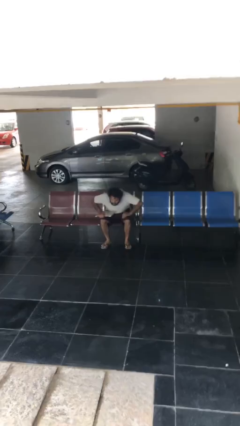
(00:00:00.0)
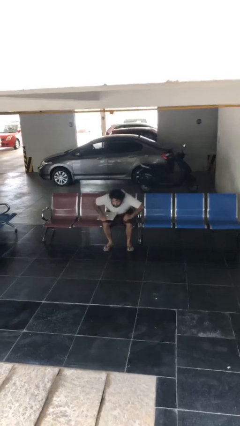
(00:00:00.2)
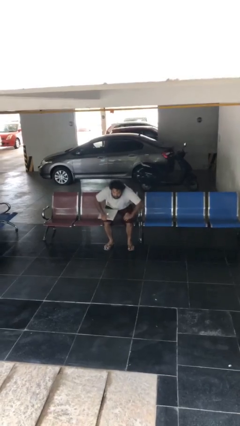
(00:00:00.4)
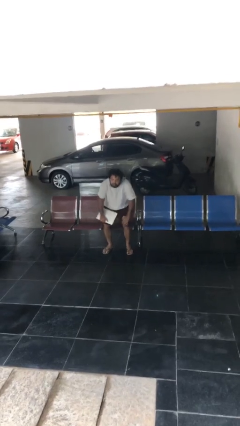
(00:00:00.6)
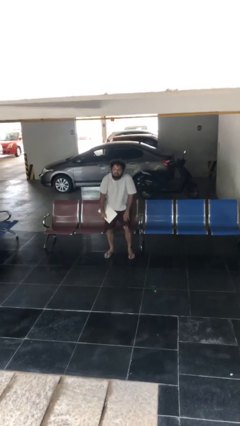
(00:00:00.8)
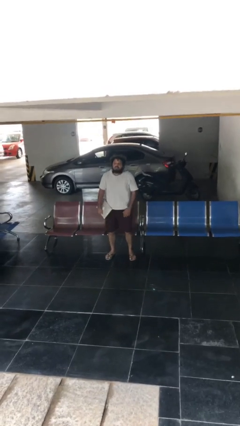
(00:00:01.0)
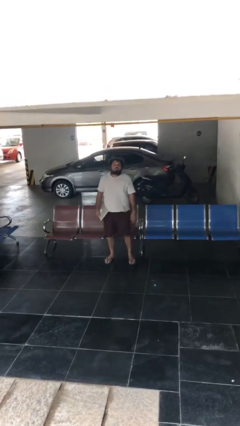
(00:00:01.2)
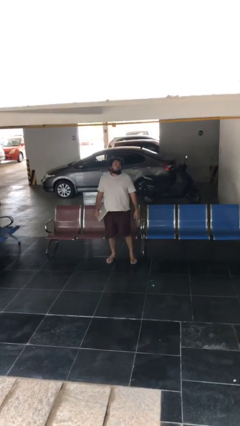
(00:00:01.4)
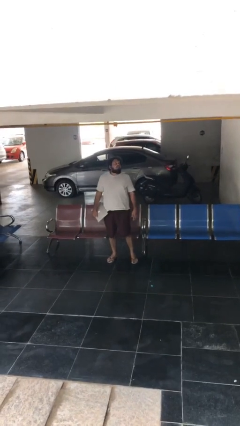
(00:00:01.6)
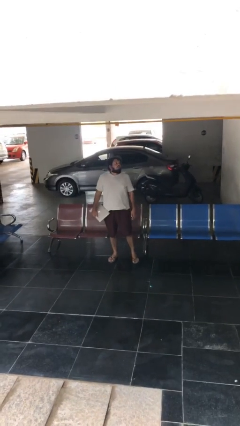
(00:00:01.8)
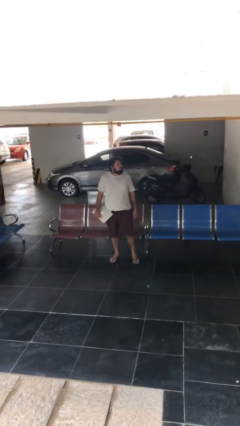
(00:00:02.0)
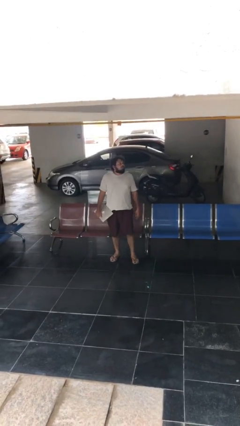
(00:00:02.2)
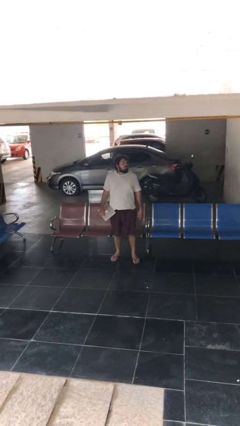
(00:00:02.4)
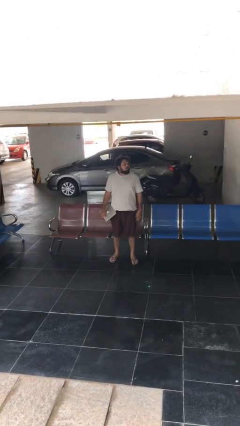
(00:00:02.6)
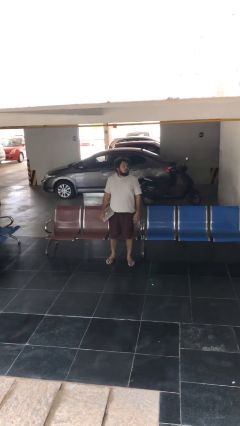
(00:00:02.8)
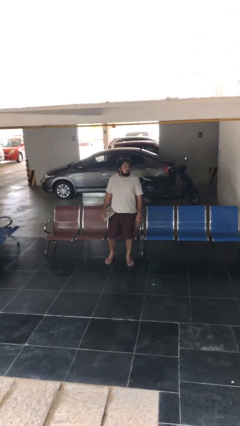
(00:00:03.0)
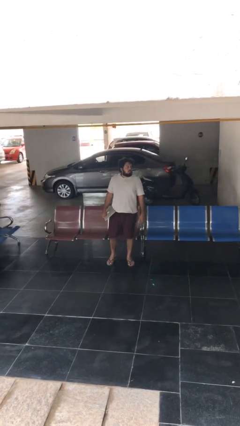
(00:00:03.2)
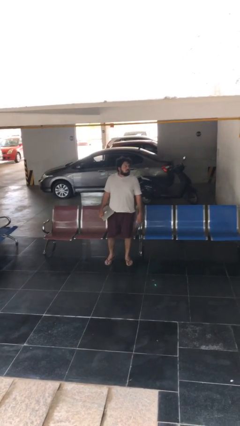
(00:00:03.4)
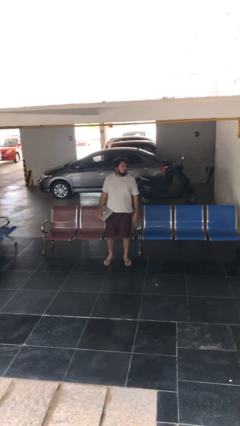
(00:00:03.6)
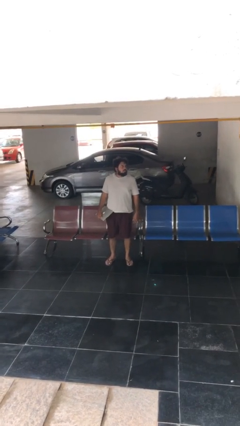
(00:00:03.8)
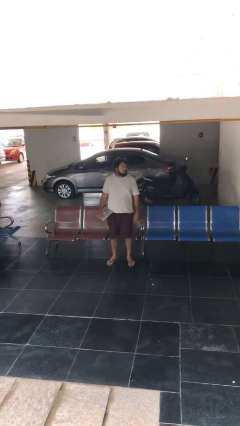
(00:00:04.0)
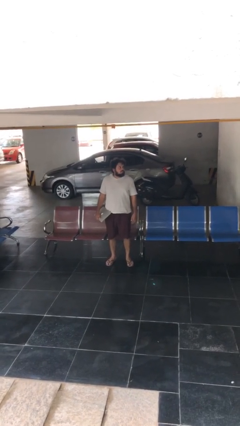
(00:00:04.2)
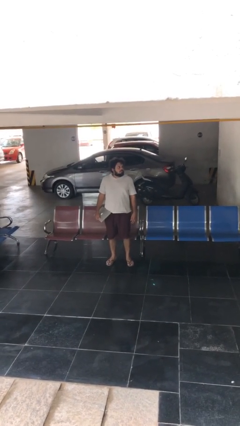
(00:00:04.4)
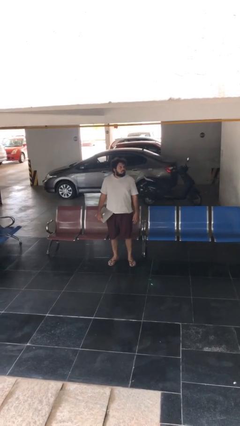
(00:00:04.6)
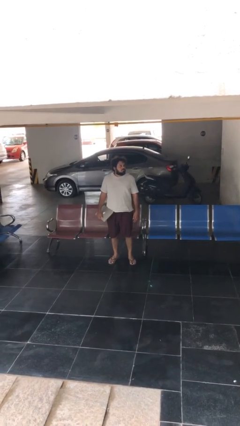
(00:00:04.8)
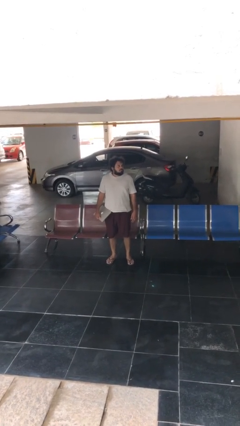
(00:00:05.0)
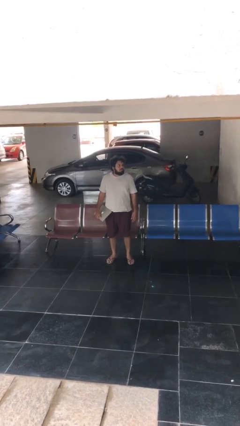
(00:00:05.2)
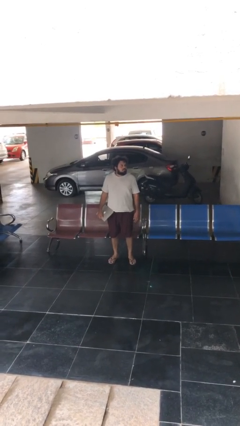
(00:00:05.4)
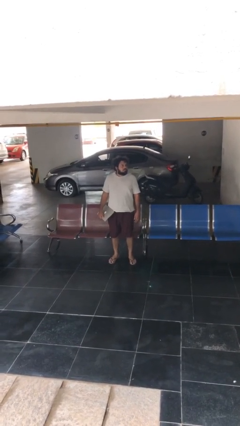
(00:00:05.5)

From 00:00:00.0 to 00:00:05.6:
person stands up

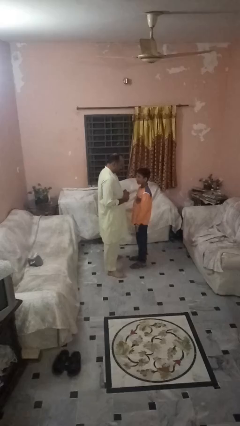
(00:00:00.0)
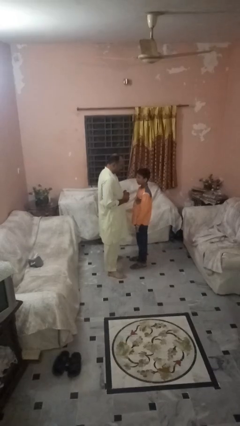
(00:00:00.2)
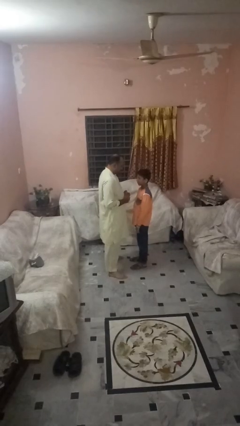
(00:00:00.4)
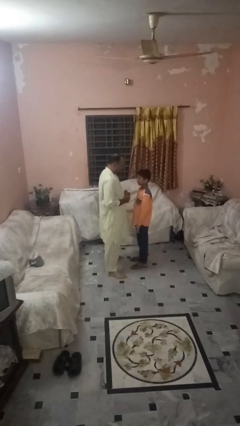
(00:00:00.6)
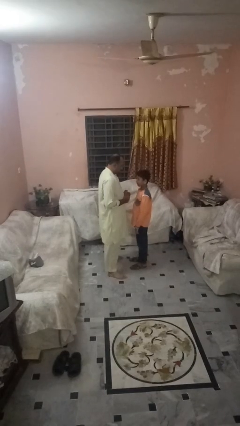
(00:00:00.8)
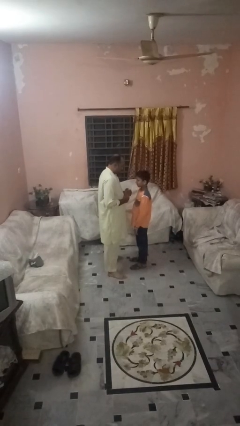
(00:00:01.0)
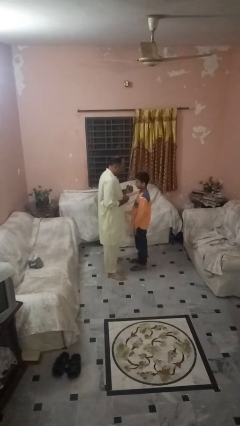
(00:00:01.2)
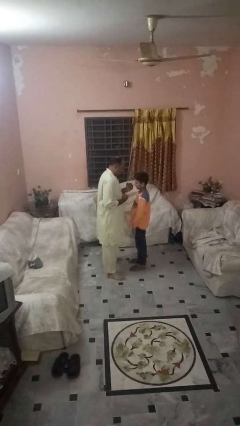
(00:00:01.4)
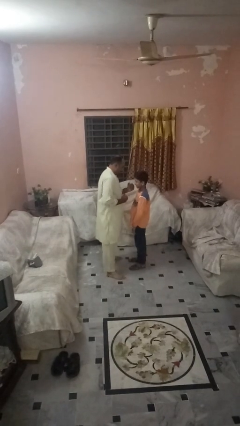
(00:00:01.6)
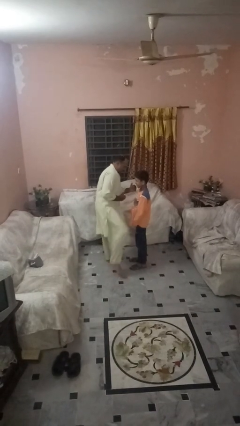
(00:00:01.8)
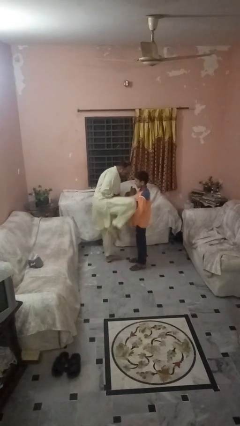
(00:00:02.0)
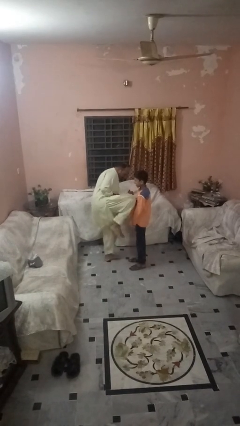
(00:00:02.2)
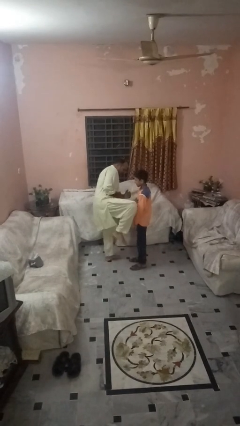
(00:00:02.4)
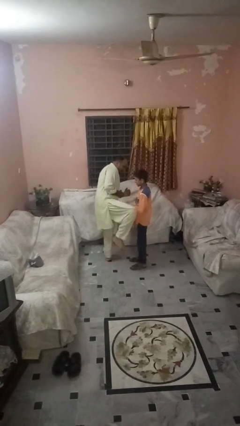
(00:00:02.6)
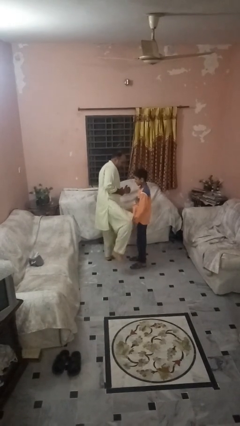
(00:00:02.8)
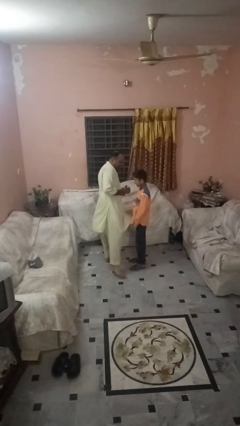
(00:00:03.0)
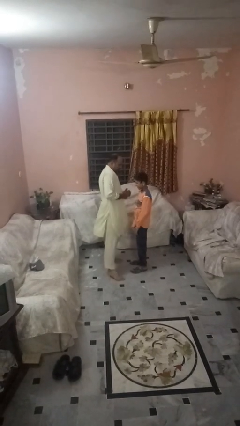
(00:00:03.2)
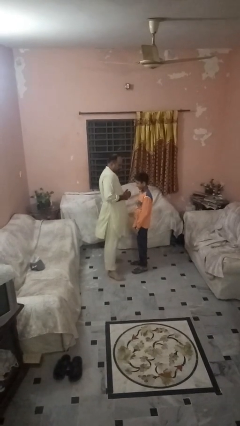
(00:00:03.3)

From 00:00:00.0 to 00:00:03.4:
person kicks object to person

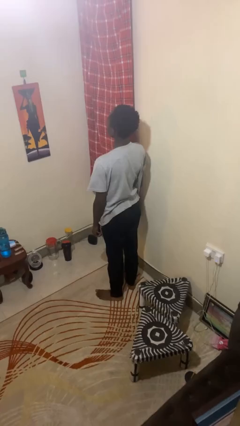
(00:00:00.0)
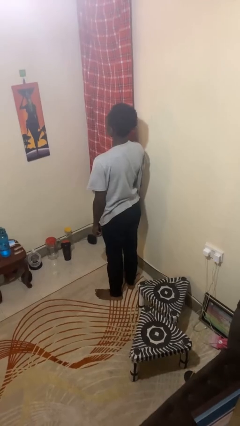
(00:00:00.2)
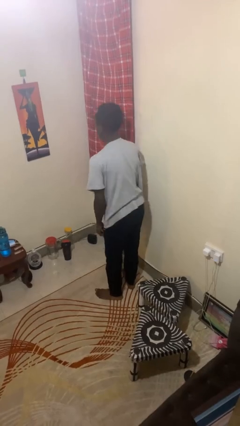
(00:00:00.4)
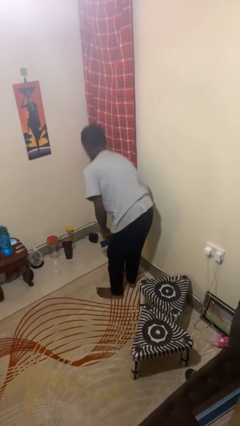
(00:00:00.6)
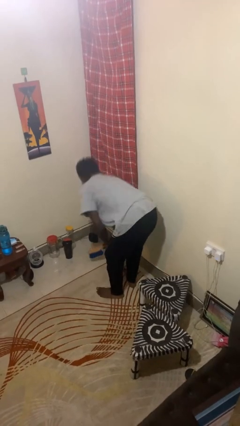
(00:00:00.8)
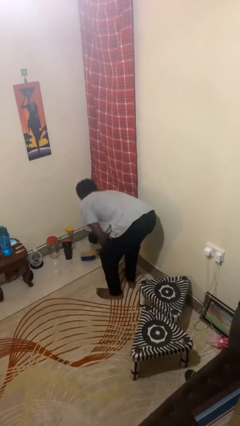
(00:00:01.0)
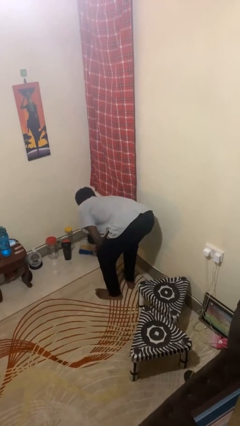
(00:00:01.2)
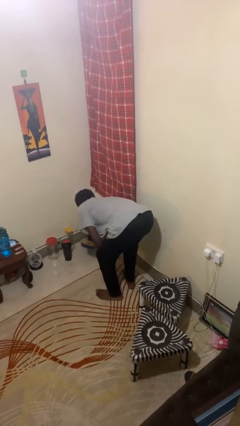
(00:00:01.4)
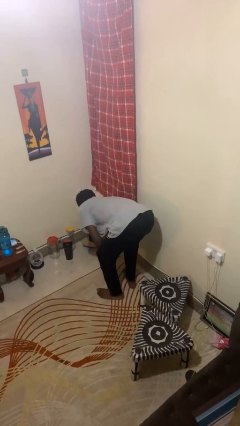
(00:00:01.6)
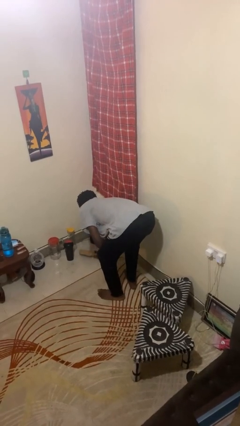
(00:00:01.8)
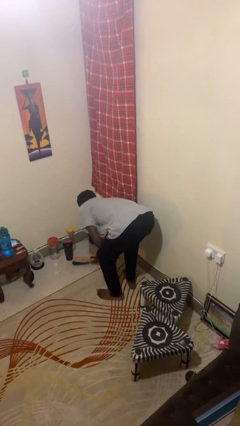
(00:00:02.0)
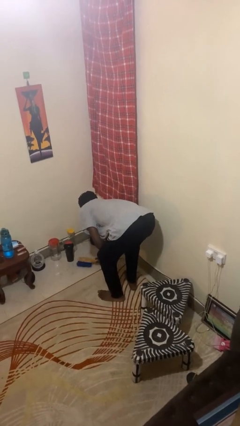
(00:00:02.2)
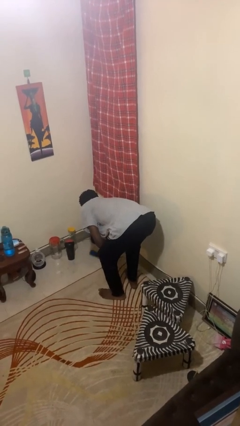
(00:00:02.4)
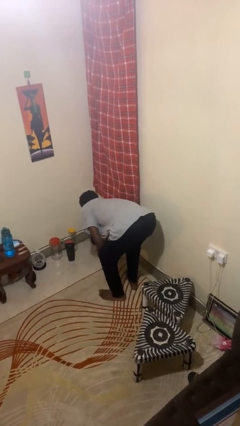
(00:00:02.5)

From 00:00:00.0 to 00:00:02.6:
person sweeps floor

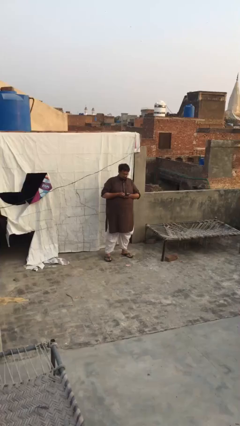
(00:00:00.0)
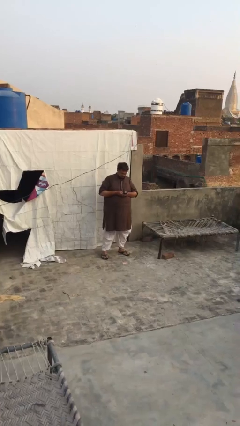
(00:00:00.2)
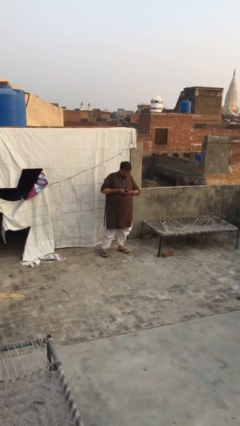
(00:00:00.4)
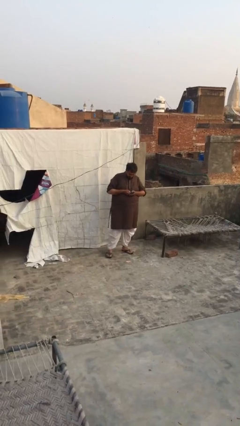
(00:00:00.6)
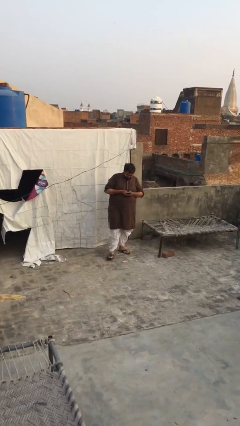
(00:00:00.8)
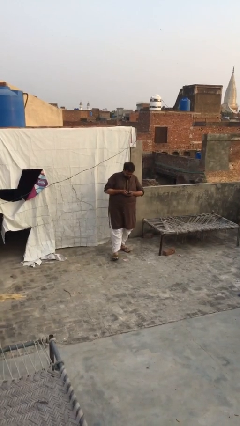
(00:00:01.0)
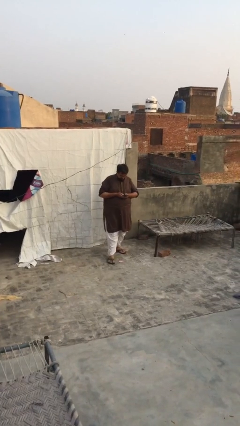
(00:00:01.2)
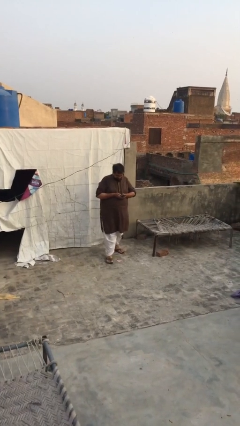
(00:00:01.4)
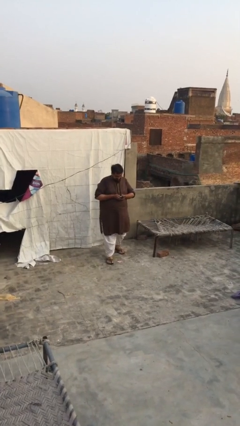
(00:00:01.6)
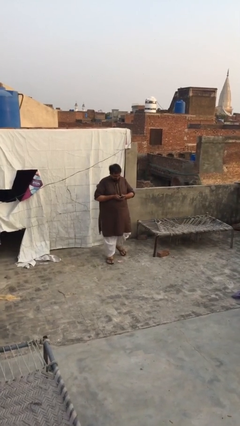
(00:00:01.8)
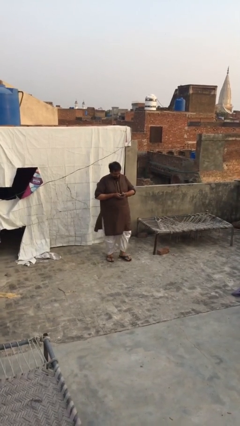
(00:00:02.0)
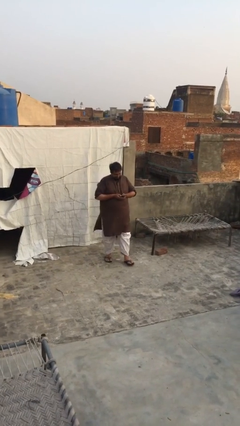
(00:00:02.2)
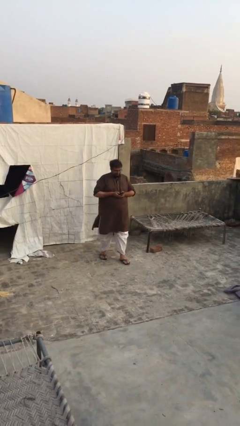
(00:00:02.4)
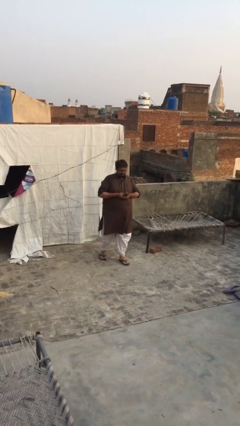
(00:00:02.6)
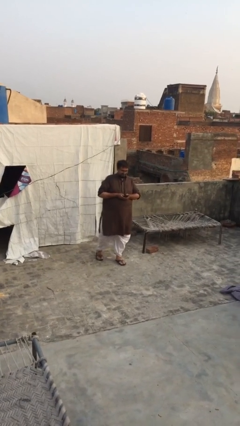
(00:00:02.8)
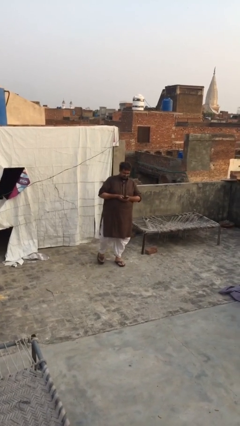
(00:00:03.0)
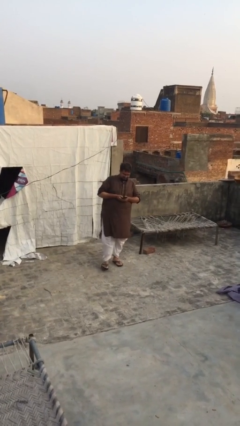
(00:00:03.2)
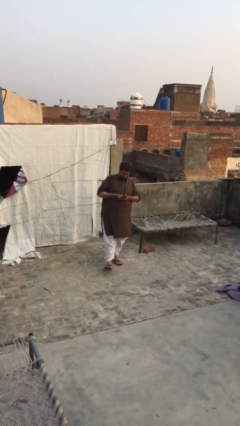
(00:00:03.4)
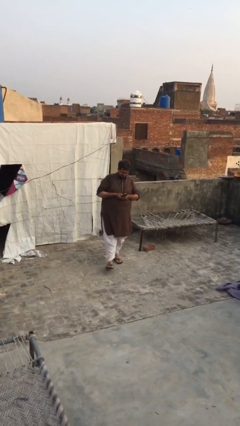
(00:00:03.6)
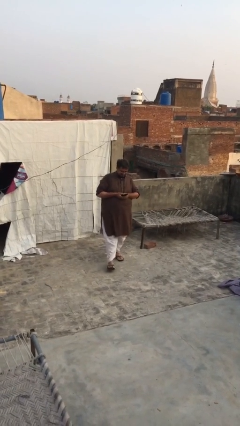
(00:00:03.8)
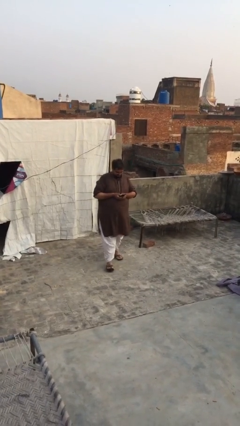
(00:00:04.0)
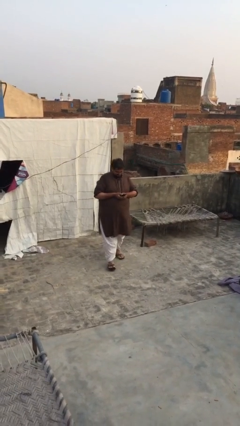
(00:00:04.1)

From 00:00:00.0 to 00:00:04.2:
person texts on phone

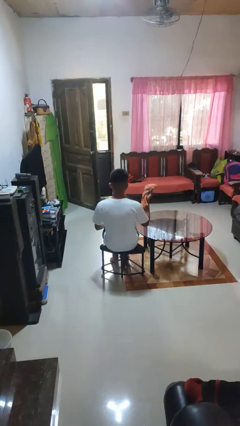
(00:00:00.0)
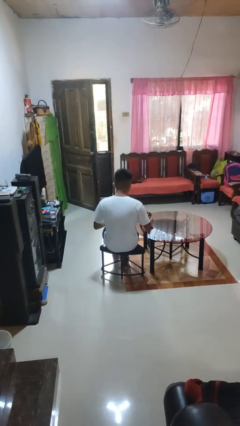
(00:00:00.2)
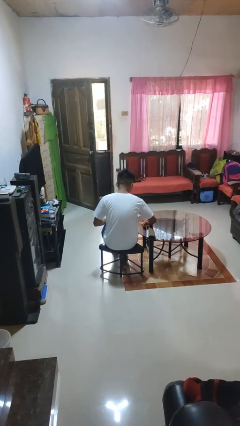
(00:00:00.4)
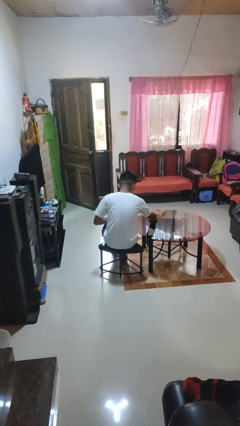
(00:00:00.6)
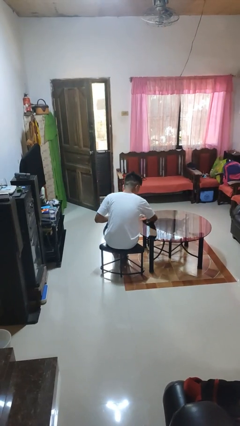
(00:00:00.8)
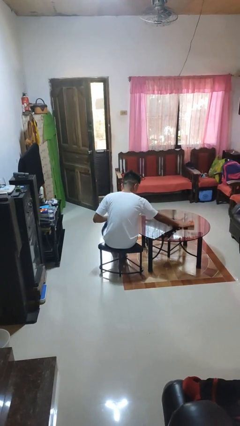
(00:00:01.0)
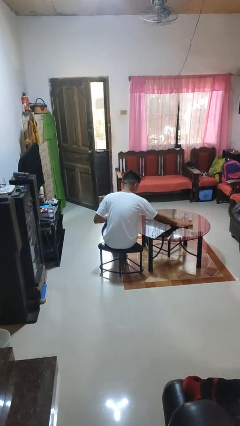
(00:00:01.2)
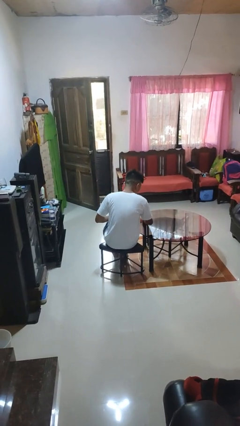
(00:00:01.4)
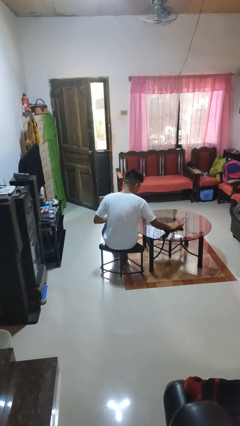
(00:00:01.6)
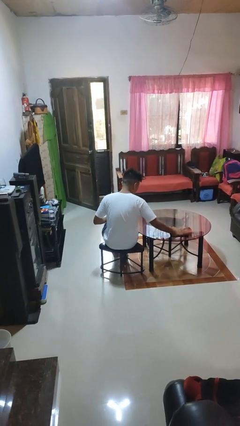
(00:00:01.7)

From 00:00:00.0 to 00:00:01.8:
person cleans table with rag
